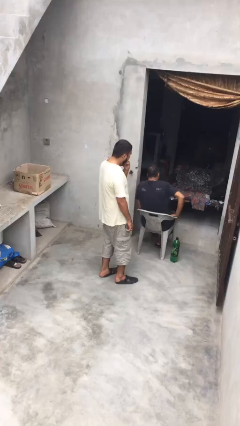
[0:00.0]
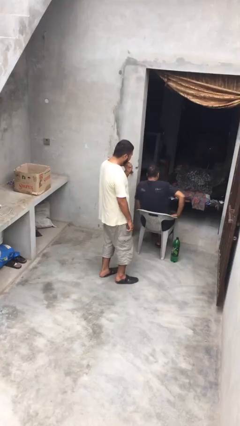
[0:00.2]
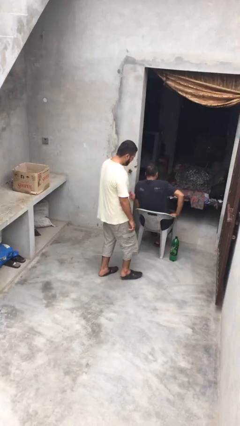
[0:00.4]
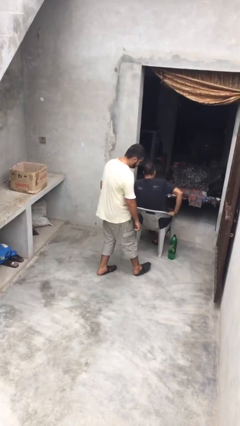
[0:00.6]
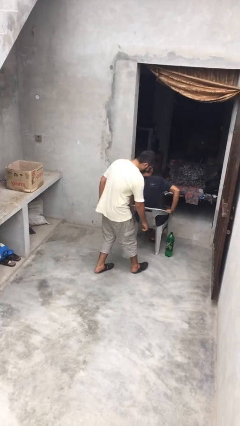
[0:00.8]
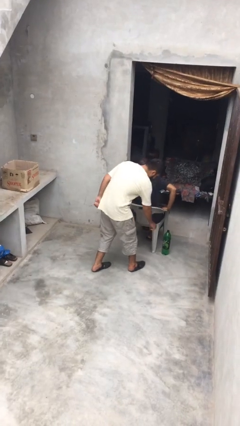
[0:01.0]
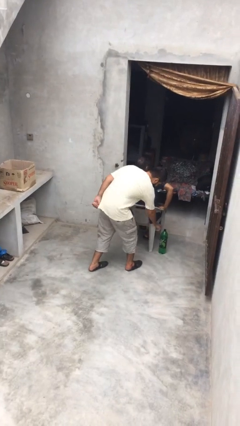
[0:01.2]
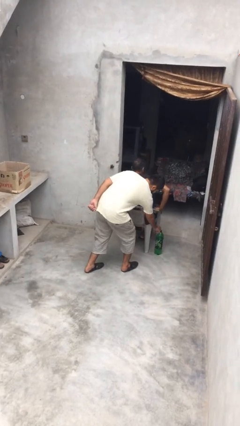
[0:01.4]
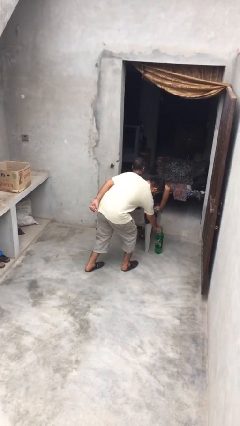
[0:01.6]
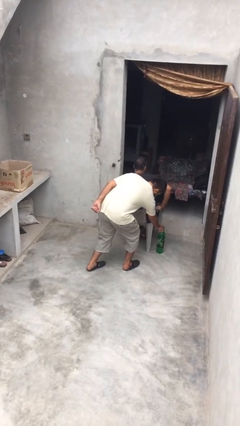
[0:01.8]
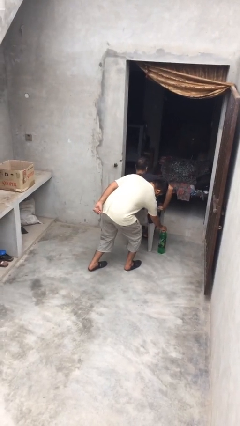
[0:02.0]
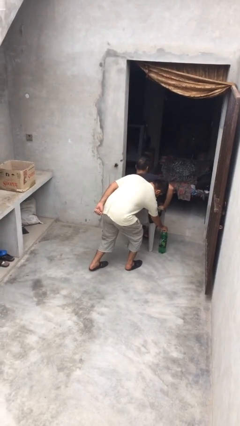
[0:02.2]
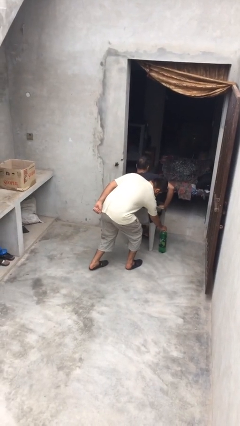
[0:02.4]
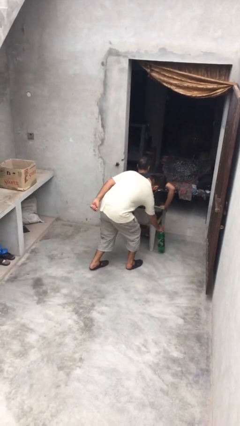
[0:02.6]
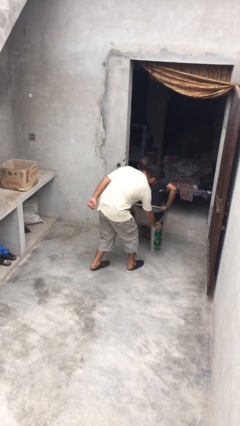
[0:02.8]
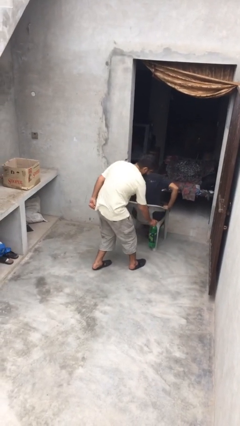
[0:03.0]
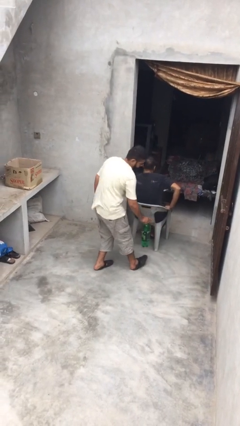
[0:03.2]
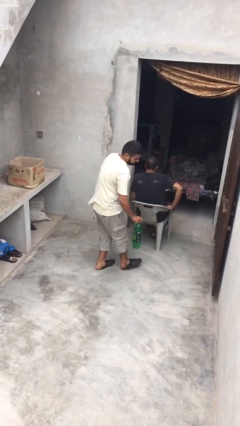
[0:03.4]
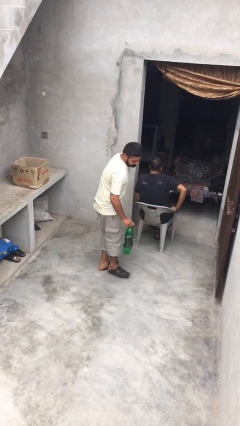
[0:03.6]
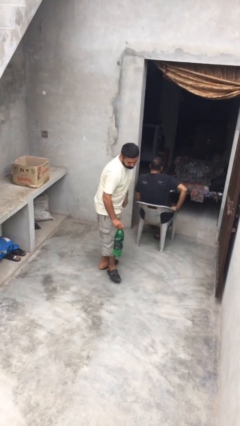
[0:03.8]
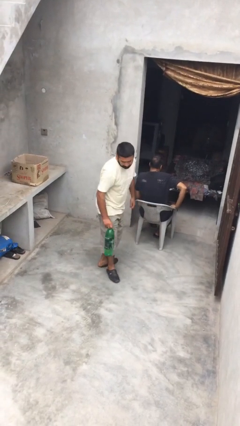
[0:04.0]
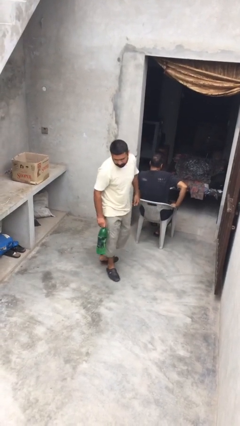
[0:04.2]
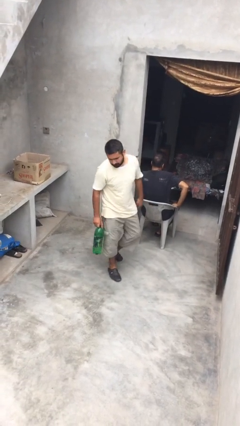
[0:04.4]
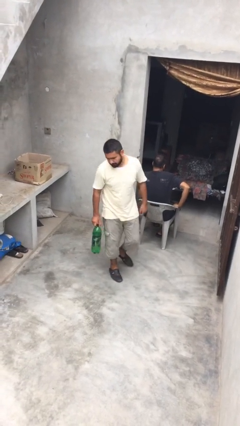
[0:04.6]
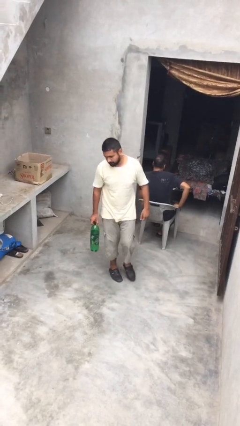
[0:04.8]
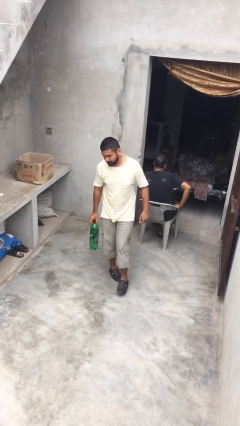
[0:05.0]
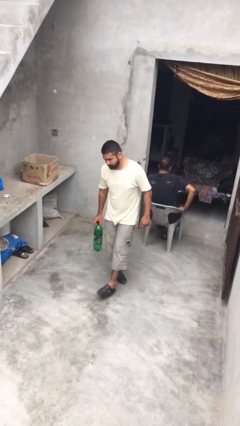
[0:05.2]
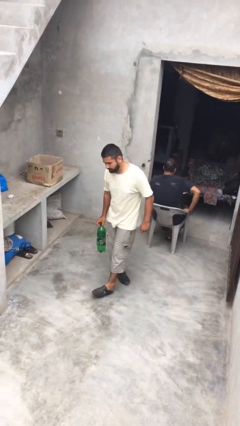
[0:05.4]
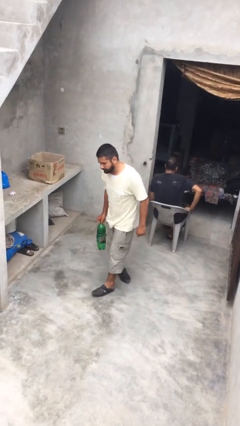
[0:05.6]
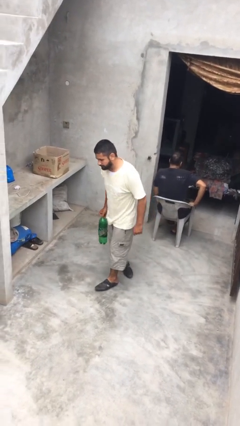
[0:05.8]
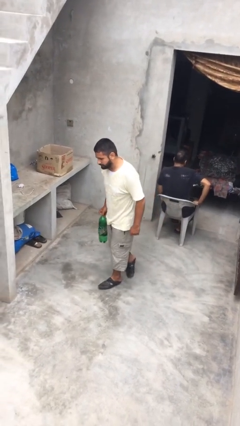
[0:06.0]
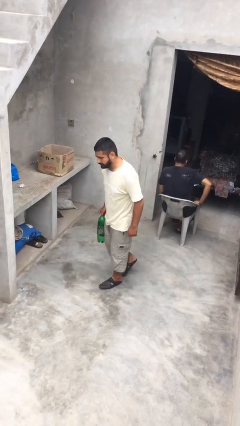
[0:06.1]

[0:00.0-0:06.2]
person steals object from person

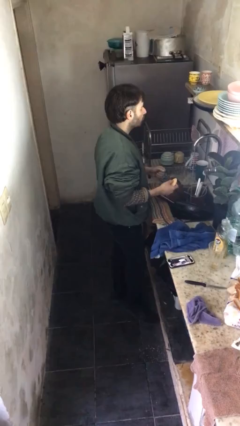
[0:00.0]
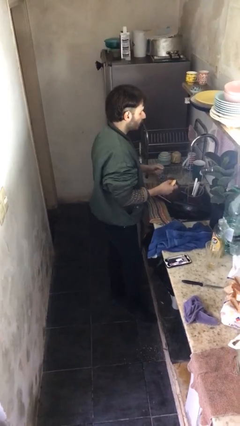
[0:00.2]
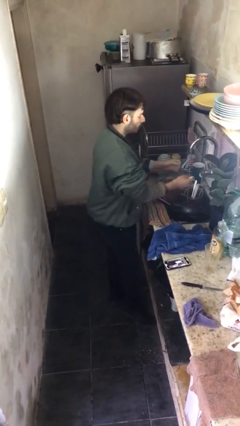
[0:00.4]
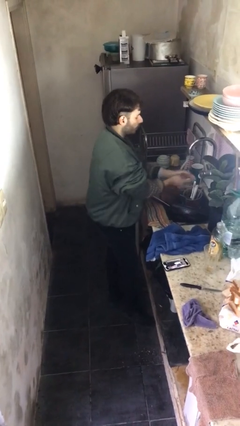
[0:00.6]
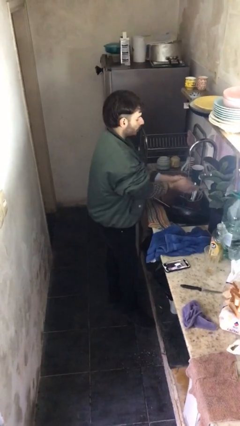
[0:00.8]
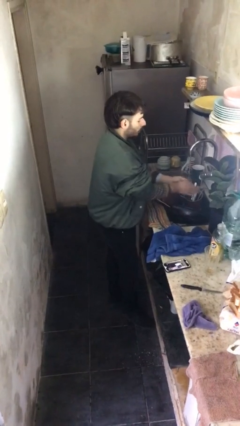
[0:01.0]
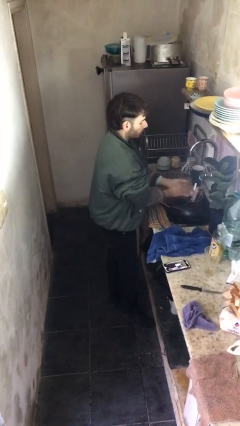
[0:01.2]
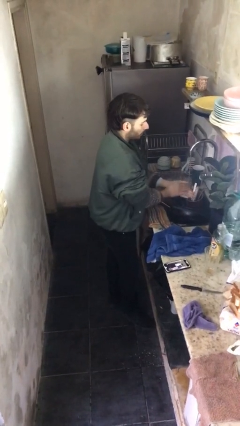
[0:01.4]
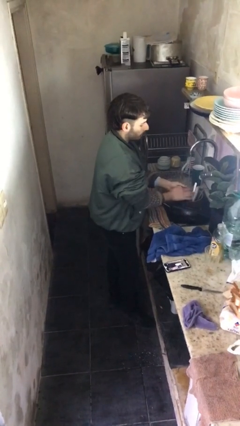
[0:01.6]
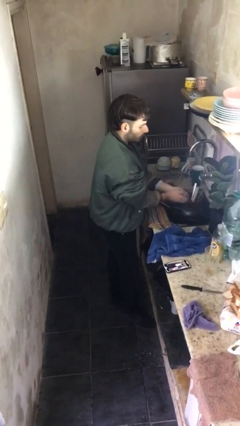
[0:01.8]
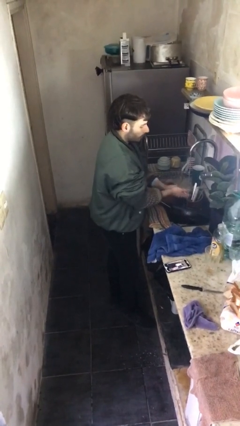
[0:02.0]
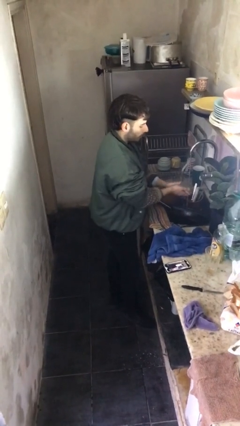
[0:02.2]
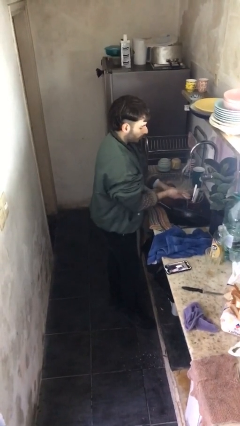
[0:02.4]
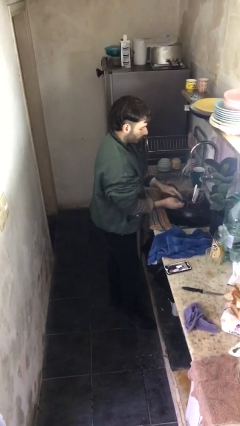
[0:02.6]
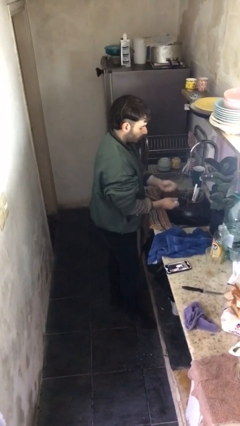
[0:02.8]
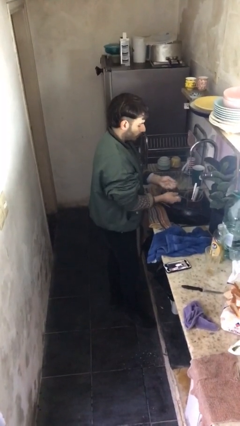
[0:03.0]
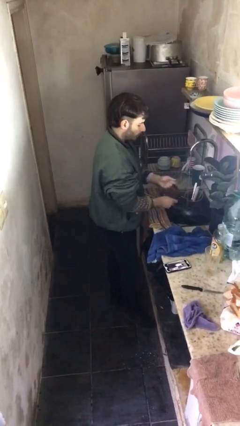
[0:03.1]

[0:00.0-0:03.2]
person washes hands

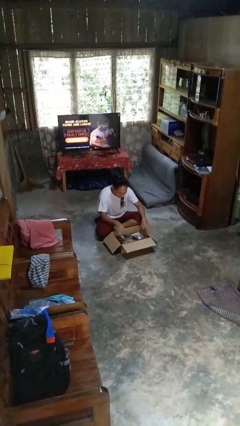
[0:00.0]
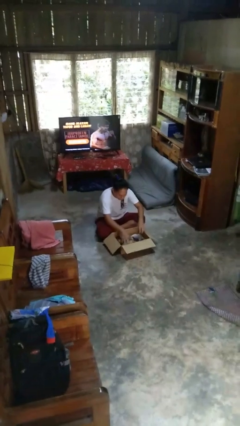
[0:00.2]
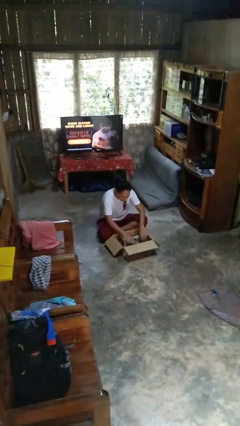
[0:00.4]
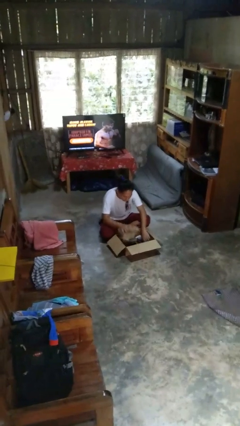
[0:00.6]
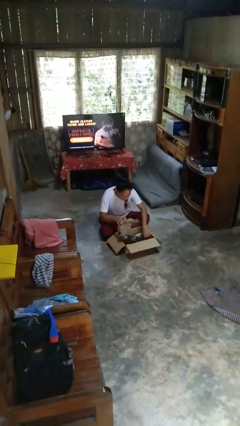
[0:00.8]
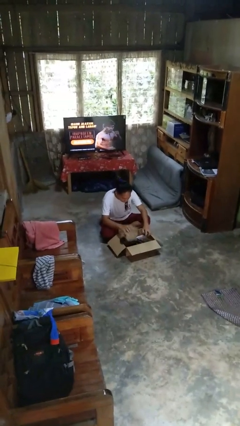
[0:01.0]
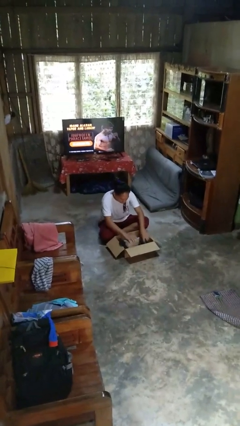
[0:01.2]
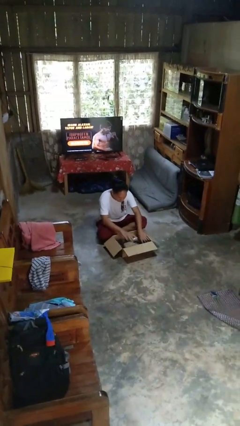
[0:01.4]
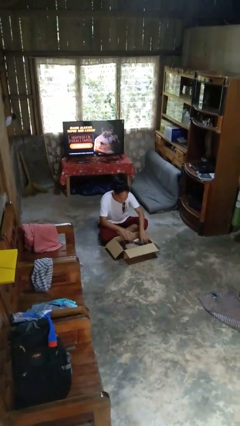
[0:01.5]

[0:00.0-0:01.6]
person searches in box

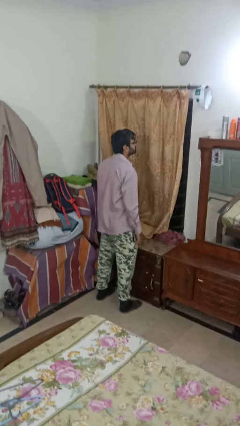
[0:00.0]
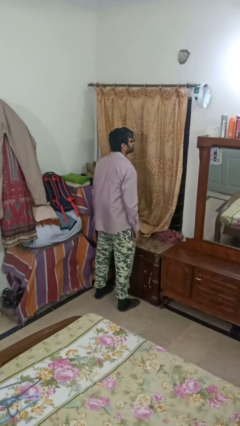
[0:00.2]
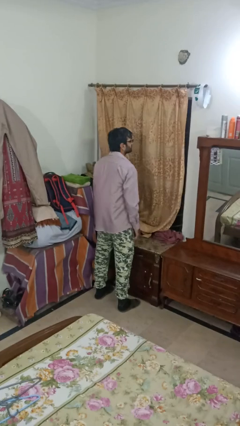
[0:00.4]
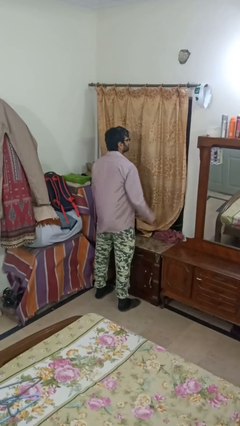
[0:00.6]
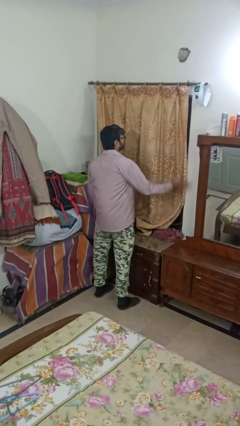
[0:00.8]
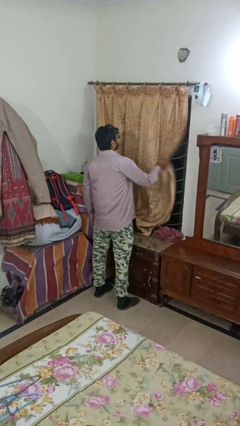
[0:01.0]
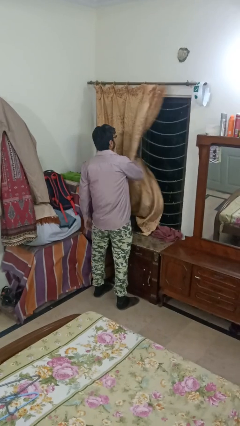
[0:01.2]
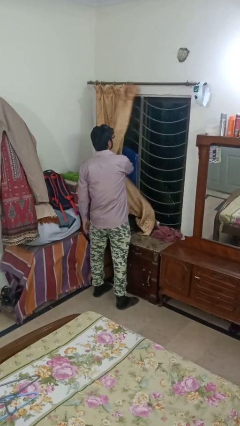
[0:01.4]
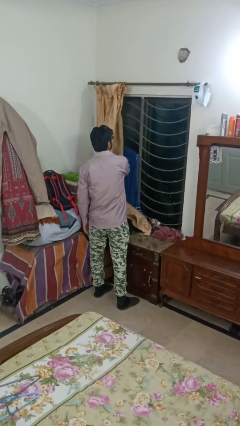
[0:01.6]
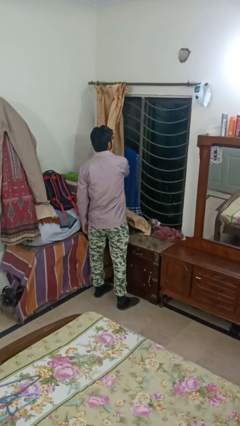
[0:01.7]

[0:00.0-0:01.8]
person opens curtains

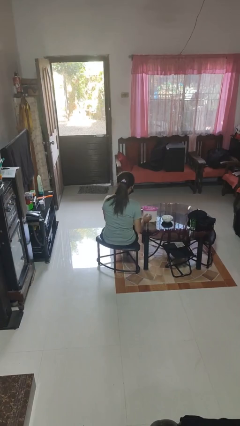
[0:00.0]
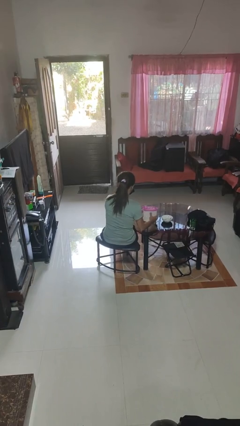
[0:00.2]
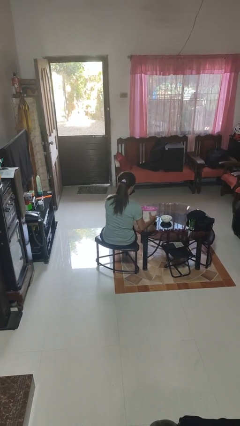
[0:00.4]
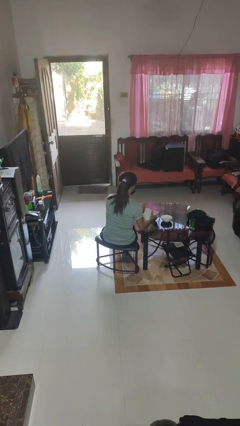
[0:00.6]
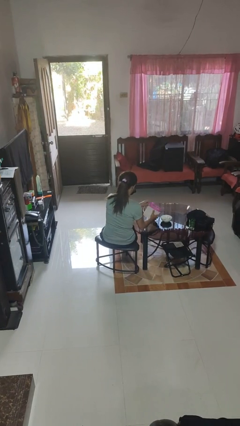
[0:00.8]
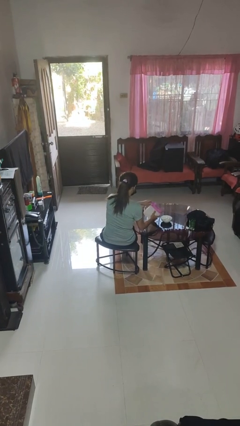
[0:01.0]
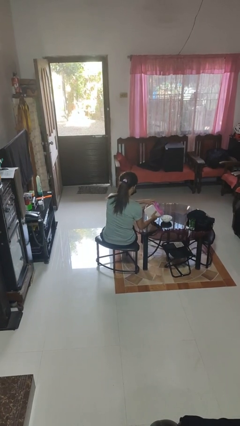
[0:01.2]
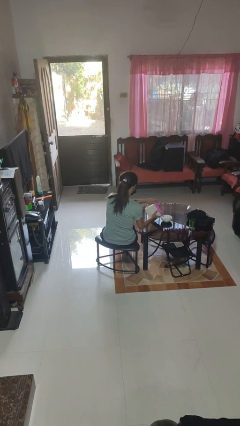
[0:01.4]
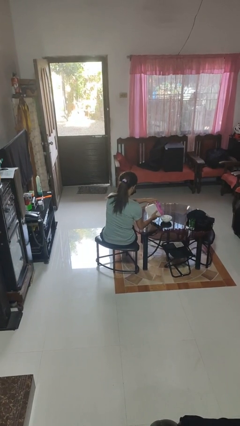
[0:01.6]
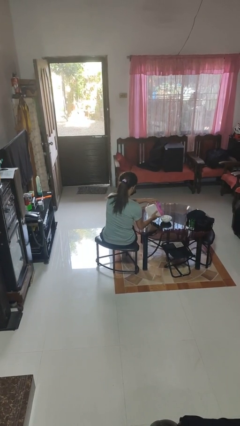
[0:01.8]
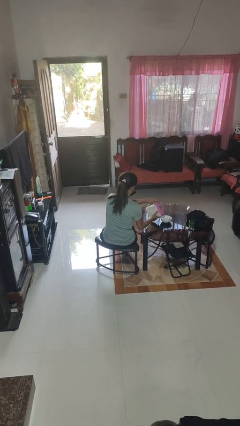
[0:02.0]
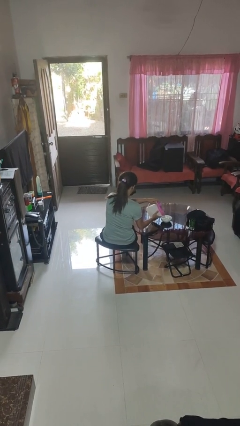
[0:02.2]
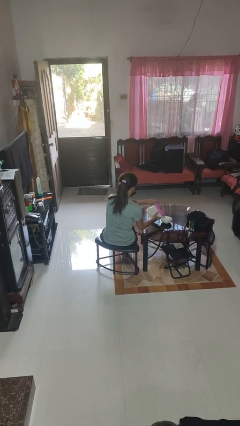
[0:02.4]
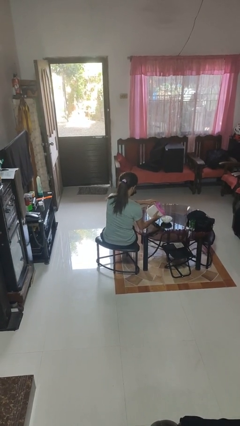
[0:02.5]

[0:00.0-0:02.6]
person pours into bowl

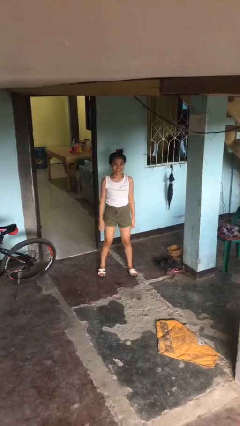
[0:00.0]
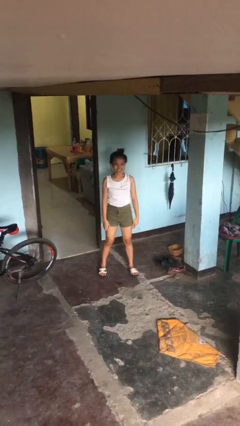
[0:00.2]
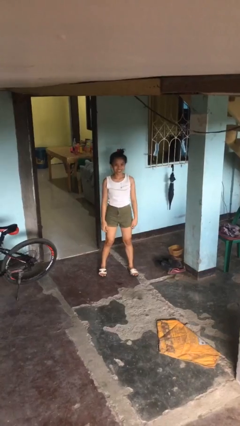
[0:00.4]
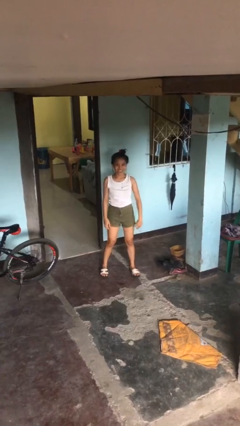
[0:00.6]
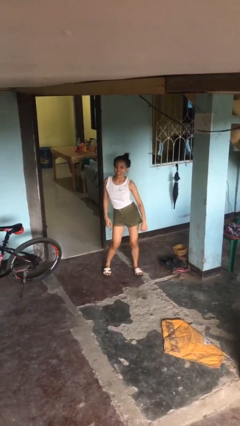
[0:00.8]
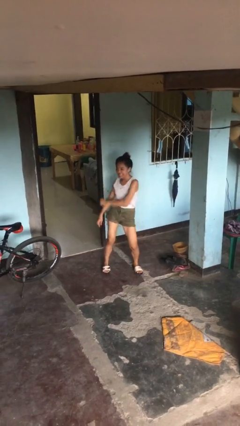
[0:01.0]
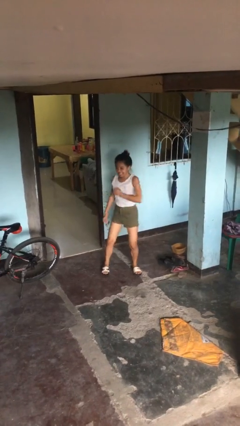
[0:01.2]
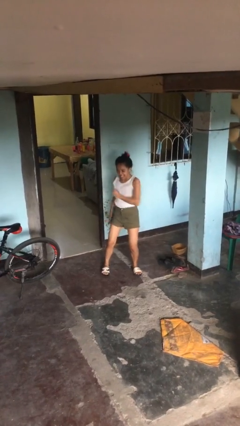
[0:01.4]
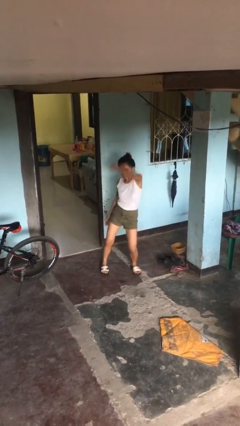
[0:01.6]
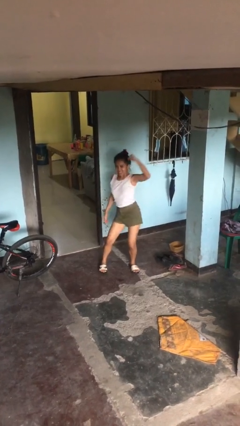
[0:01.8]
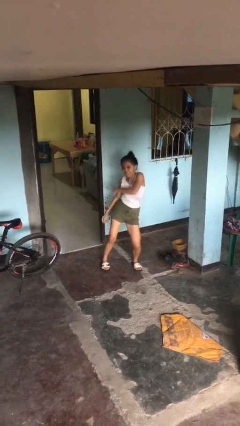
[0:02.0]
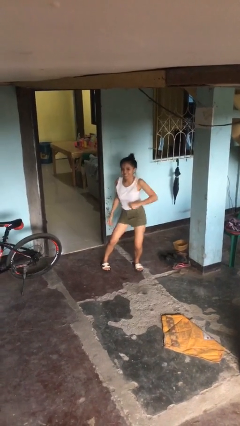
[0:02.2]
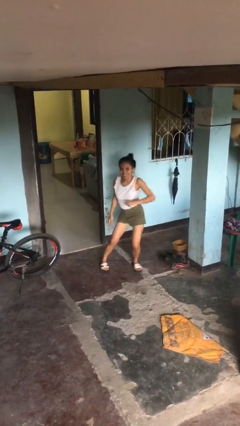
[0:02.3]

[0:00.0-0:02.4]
person dances in place
